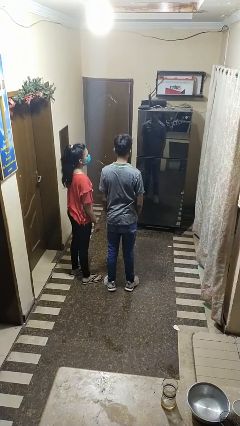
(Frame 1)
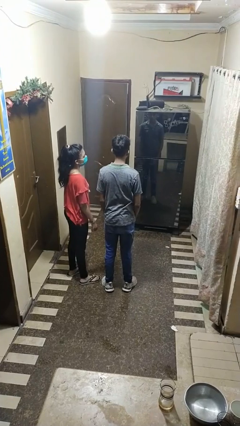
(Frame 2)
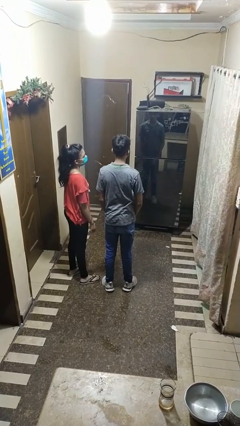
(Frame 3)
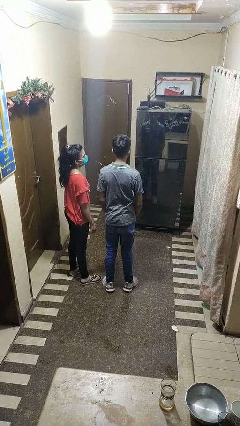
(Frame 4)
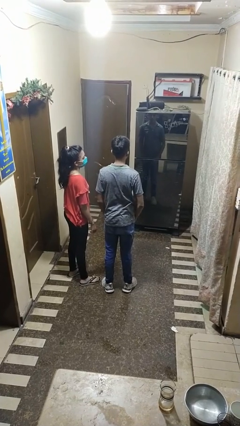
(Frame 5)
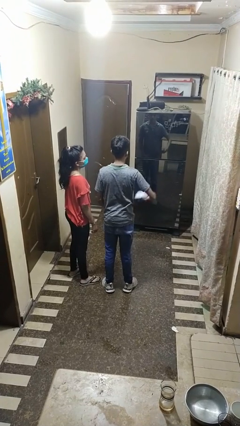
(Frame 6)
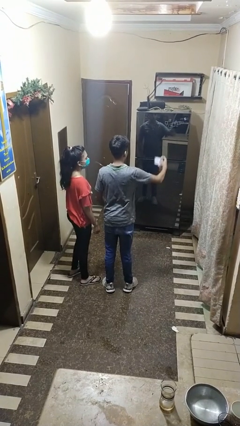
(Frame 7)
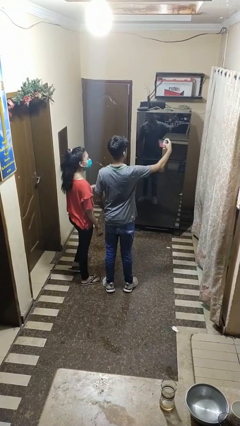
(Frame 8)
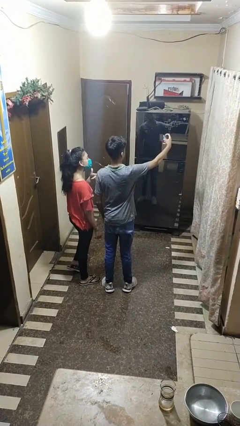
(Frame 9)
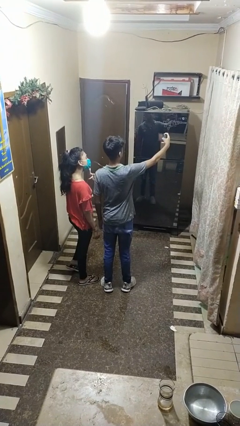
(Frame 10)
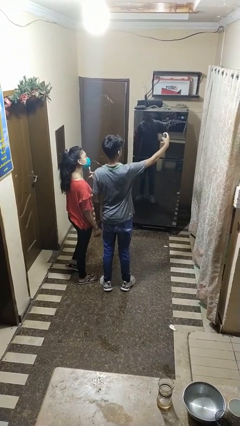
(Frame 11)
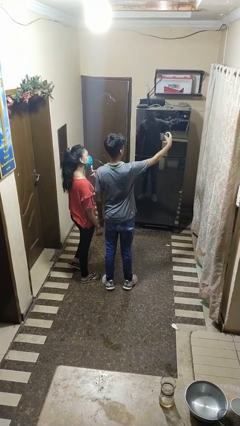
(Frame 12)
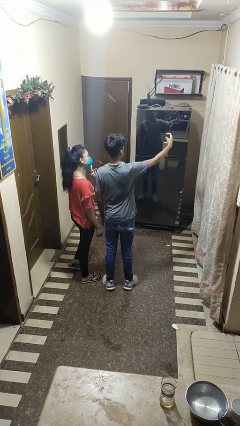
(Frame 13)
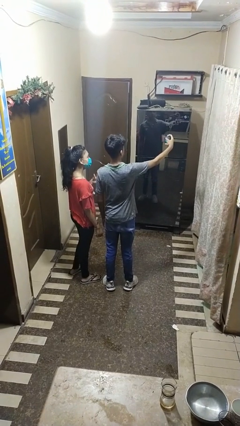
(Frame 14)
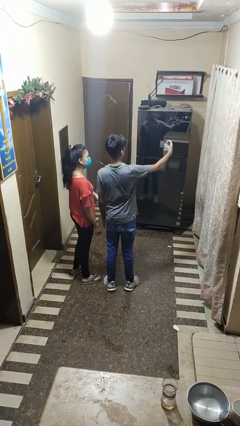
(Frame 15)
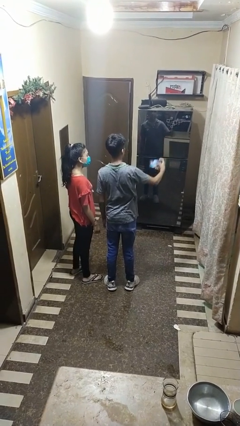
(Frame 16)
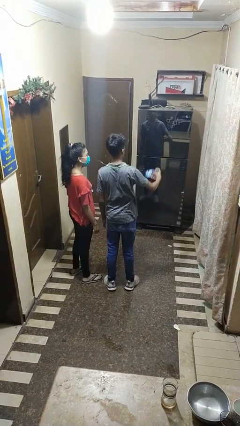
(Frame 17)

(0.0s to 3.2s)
person takes selfie with person

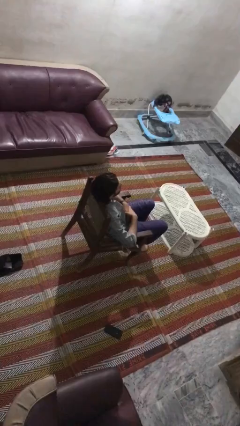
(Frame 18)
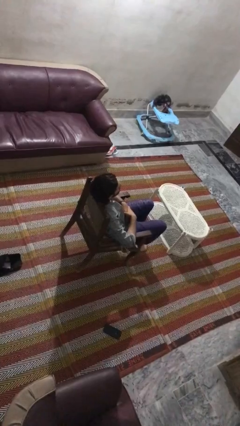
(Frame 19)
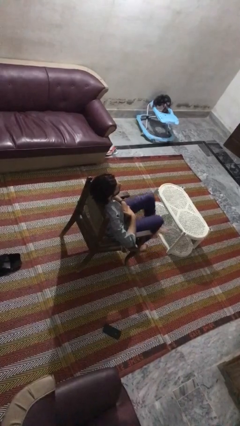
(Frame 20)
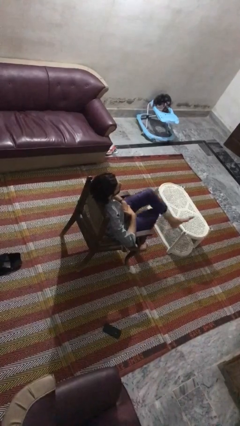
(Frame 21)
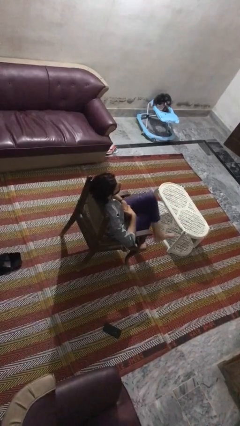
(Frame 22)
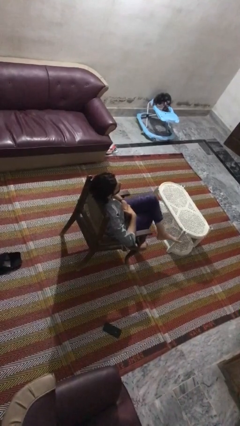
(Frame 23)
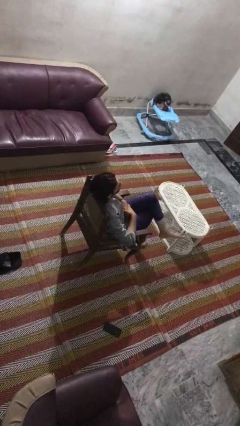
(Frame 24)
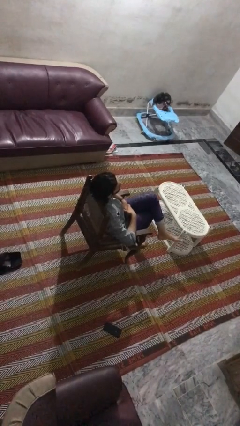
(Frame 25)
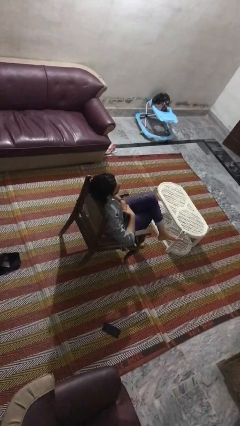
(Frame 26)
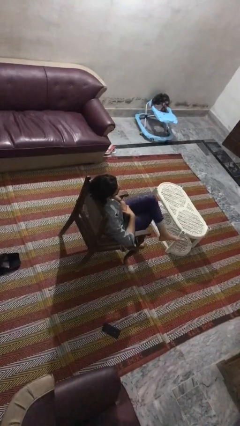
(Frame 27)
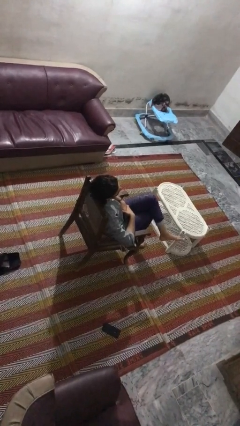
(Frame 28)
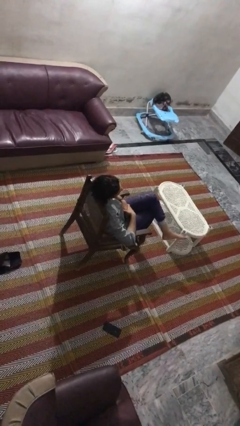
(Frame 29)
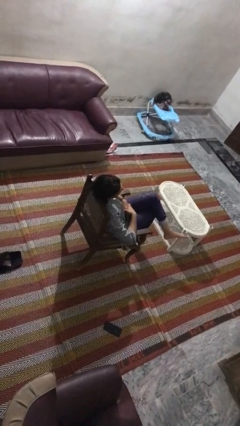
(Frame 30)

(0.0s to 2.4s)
person crosses legs

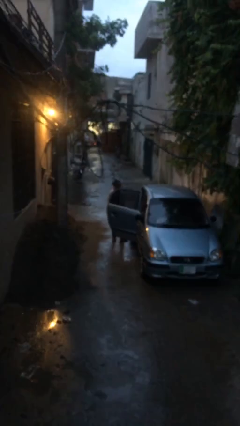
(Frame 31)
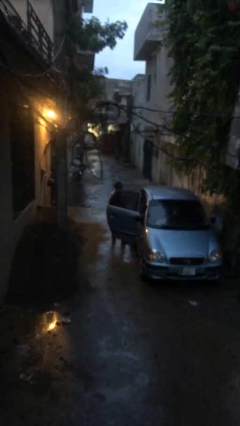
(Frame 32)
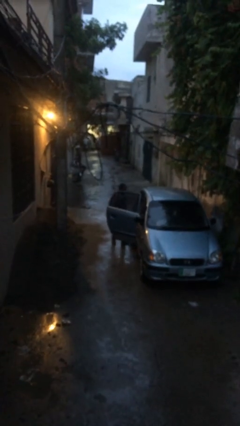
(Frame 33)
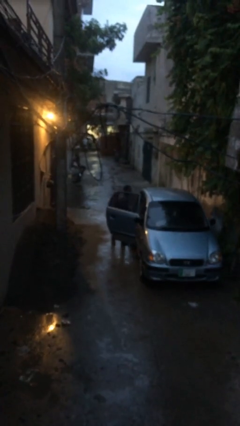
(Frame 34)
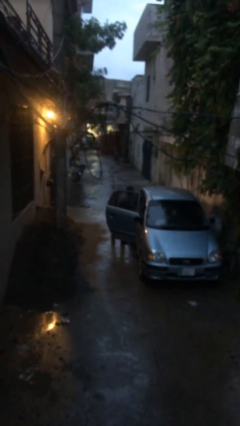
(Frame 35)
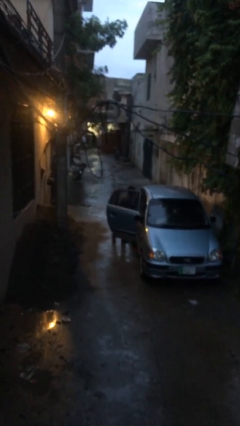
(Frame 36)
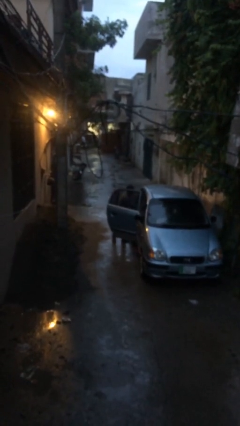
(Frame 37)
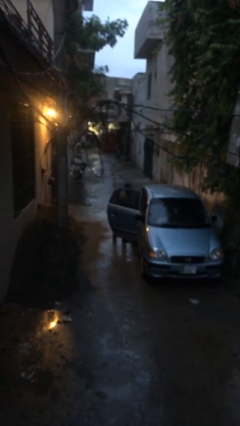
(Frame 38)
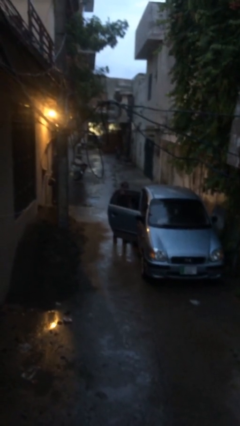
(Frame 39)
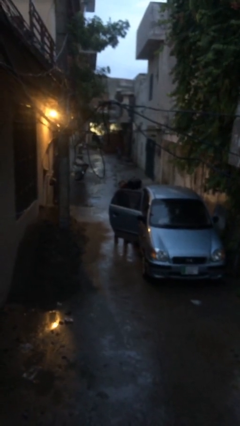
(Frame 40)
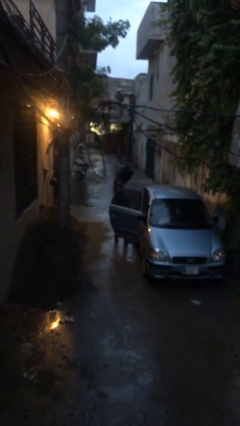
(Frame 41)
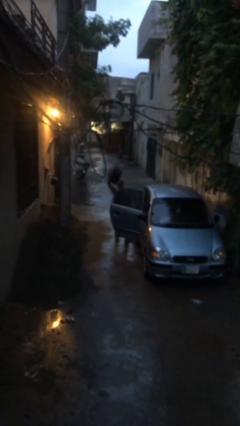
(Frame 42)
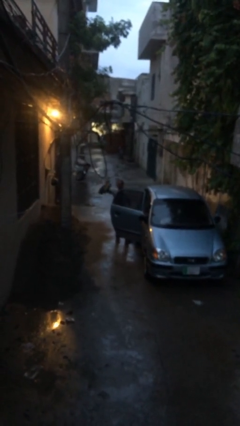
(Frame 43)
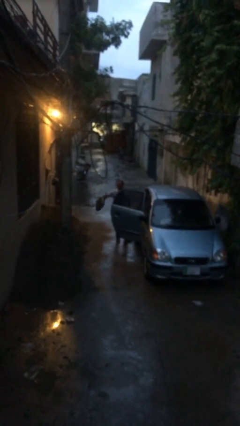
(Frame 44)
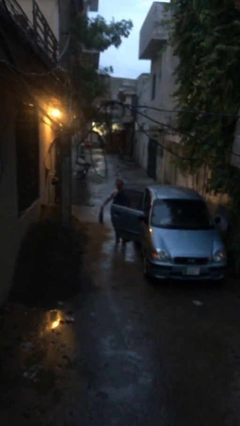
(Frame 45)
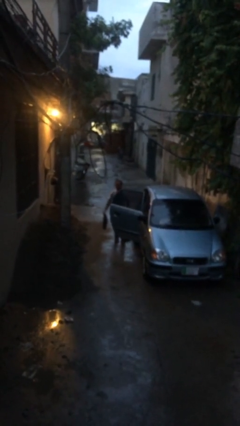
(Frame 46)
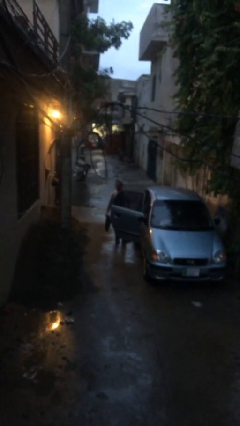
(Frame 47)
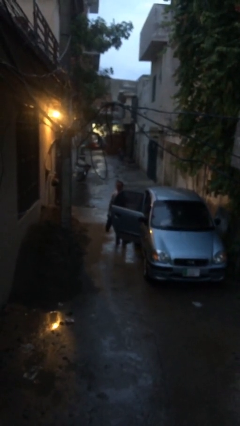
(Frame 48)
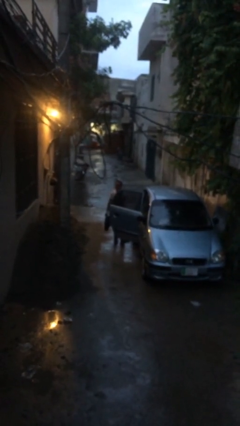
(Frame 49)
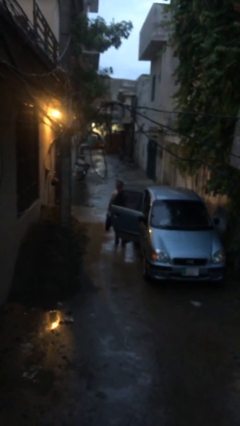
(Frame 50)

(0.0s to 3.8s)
person unloads car

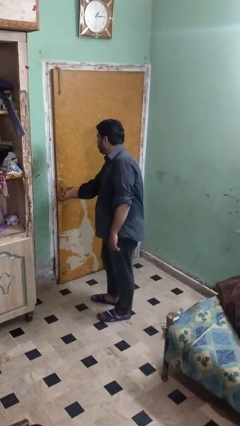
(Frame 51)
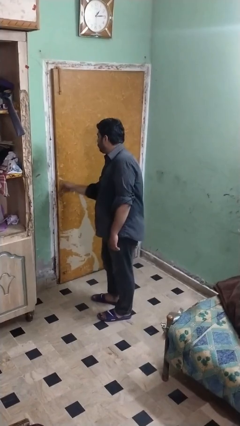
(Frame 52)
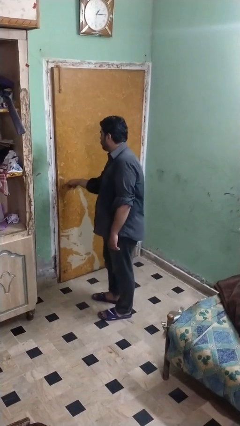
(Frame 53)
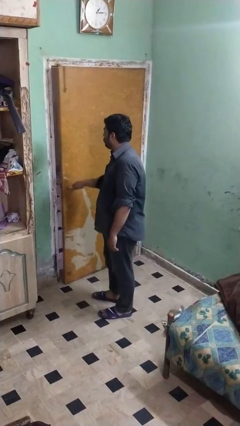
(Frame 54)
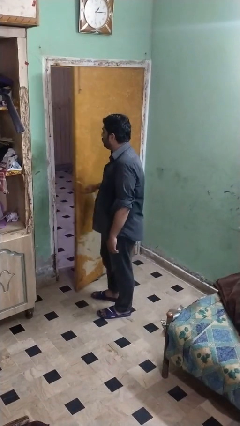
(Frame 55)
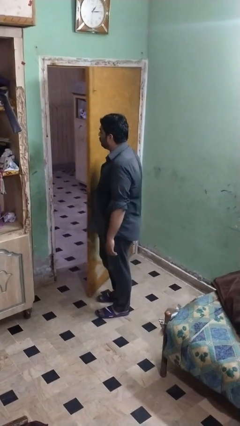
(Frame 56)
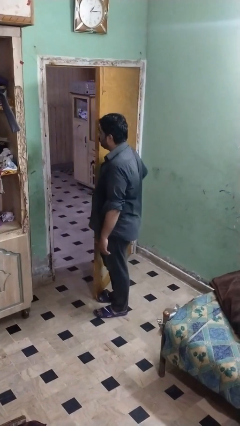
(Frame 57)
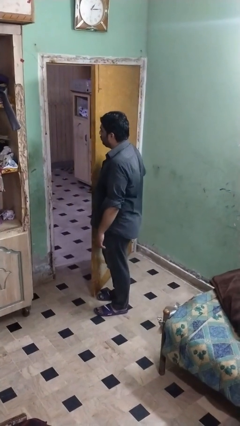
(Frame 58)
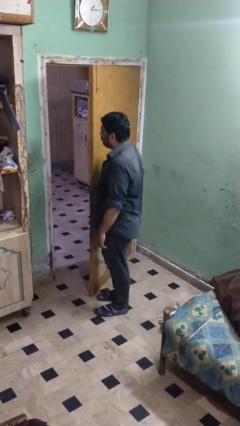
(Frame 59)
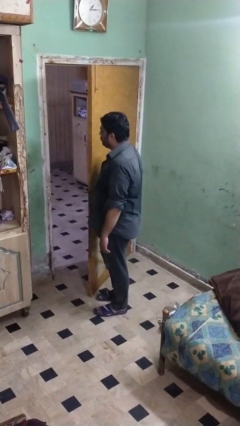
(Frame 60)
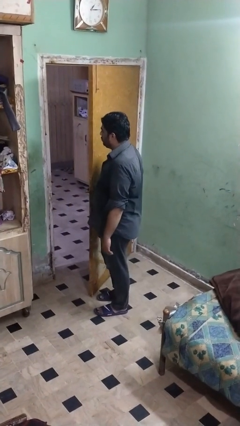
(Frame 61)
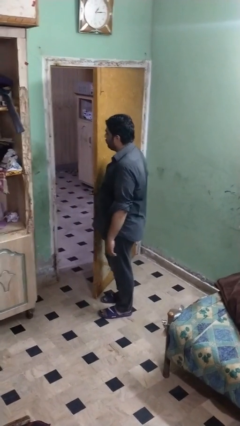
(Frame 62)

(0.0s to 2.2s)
person opens facility door

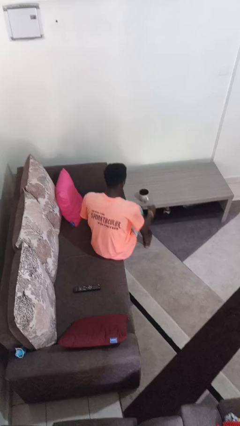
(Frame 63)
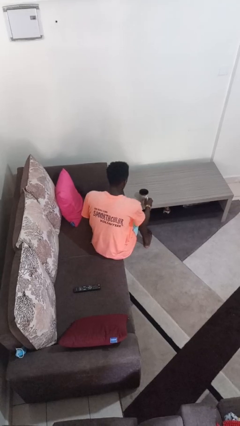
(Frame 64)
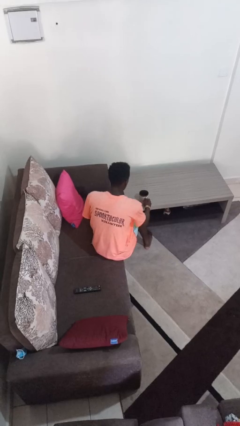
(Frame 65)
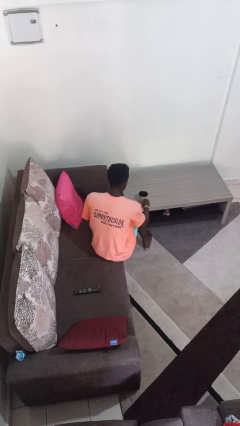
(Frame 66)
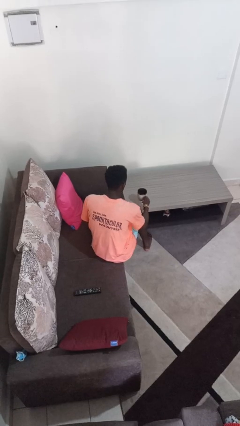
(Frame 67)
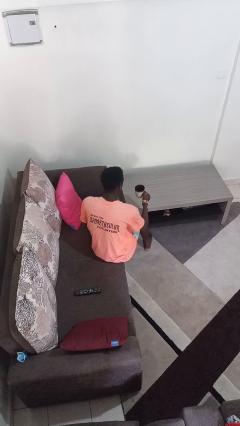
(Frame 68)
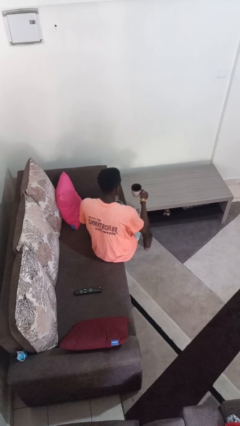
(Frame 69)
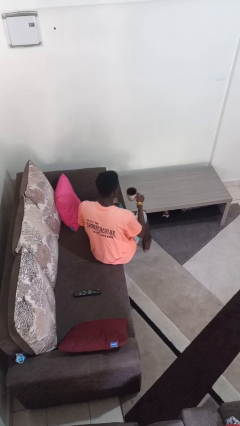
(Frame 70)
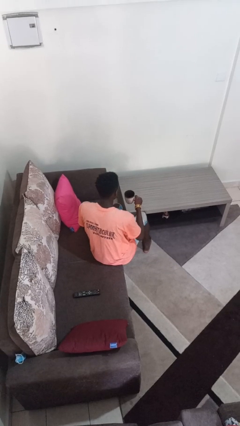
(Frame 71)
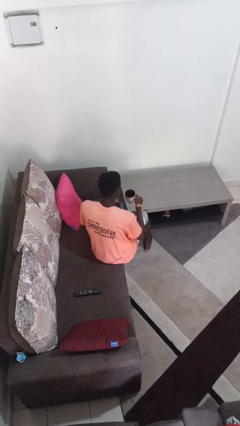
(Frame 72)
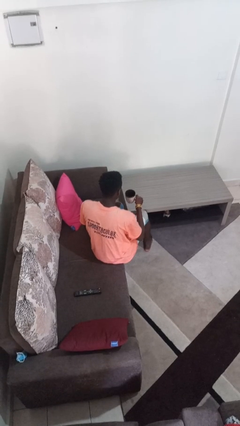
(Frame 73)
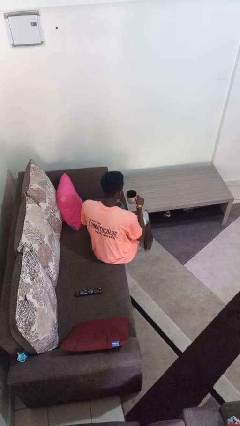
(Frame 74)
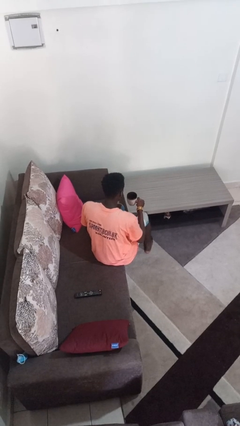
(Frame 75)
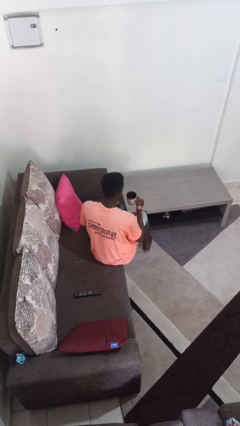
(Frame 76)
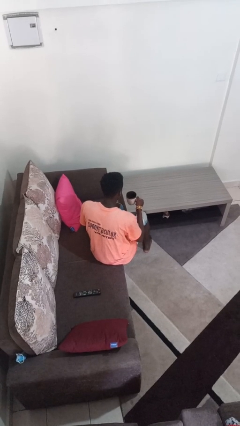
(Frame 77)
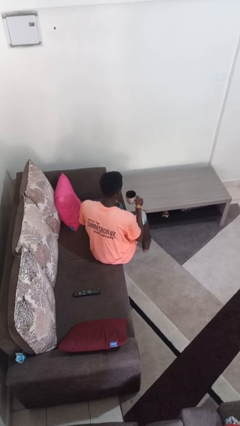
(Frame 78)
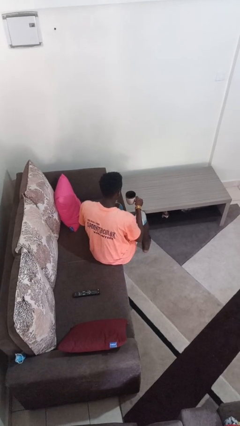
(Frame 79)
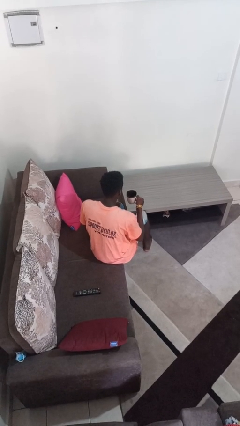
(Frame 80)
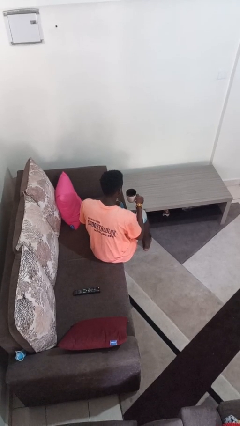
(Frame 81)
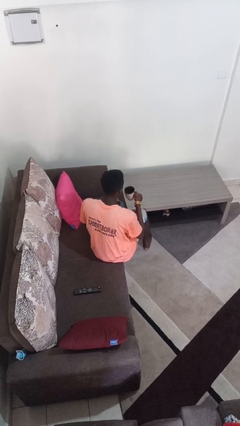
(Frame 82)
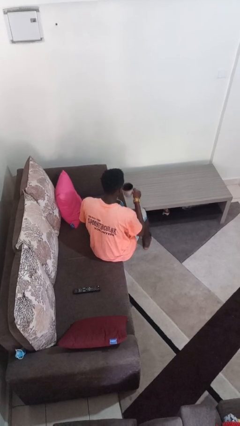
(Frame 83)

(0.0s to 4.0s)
person picks up object from table

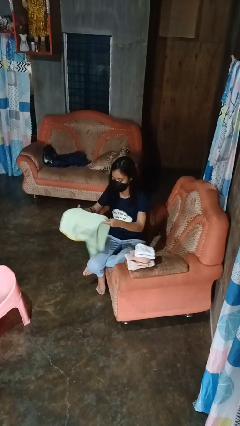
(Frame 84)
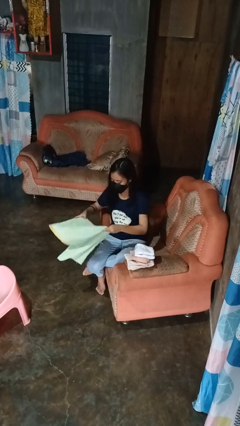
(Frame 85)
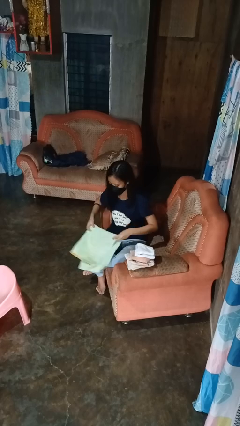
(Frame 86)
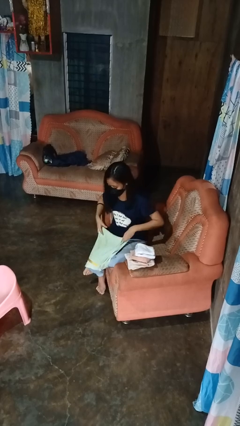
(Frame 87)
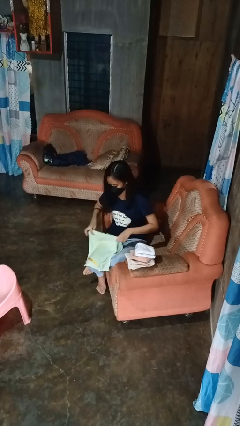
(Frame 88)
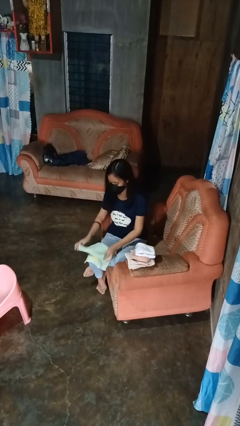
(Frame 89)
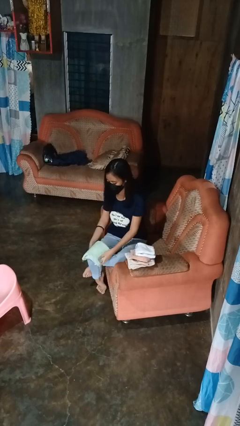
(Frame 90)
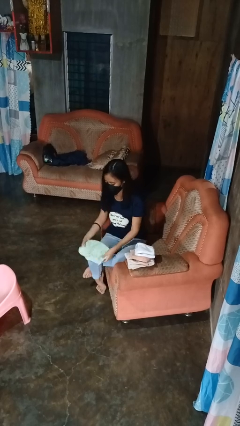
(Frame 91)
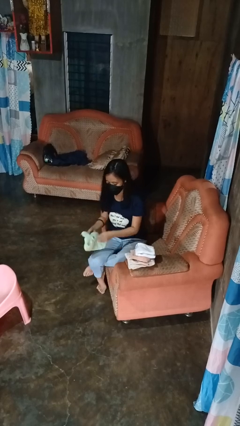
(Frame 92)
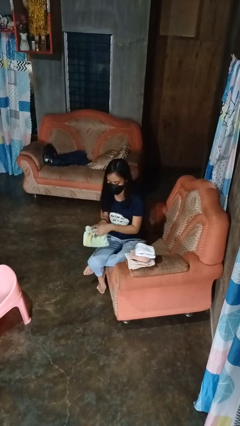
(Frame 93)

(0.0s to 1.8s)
person folds towel

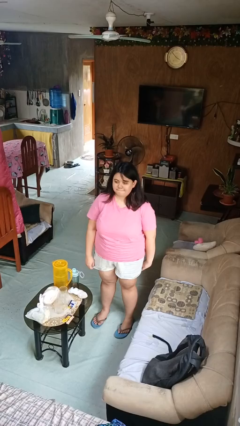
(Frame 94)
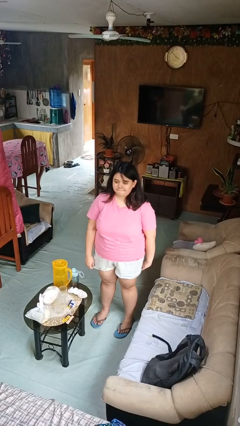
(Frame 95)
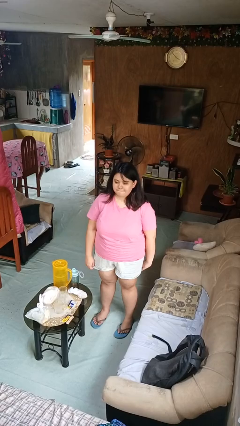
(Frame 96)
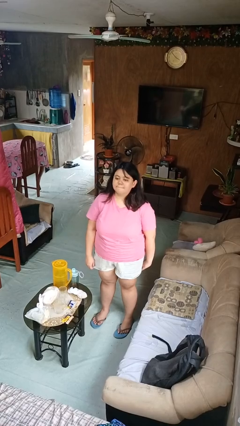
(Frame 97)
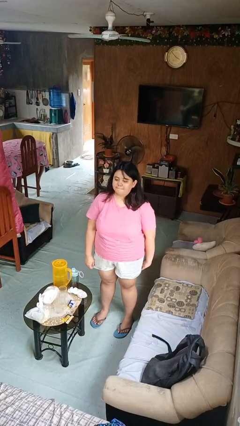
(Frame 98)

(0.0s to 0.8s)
person nods head
